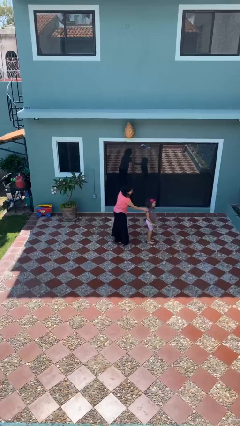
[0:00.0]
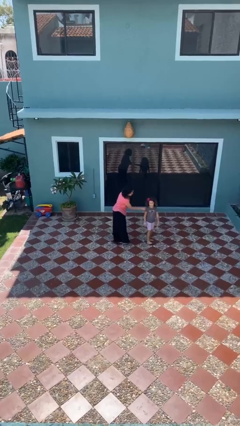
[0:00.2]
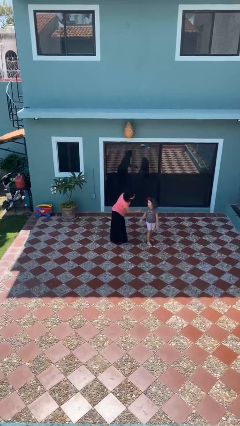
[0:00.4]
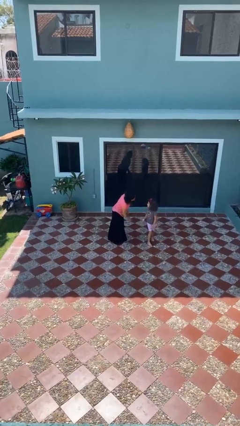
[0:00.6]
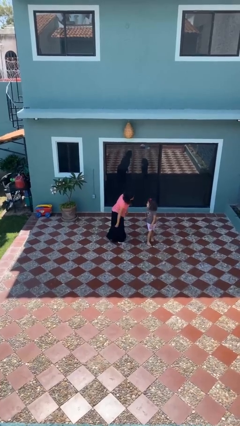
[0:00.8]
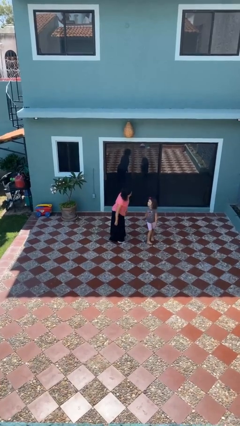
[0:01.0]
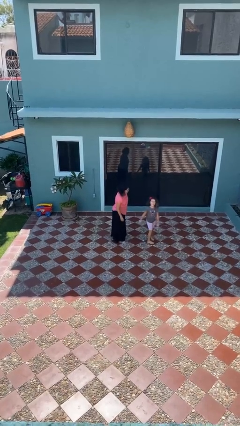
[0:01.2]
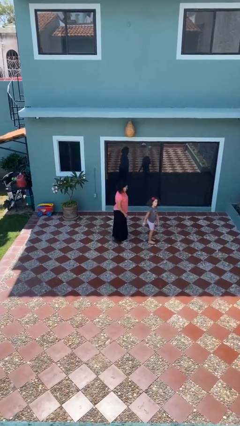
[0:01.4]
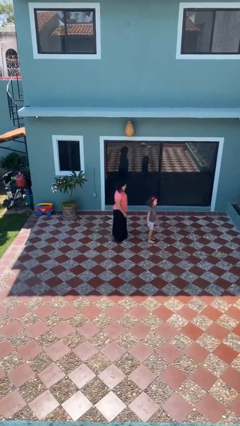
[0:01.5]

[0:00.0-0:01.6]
person spins person around

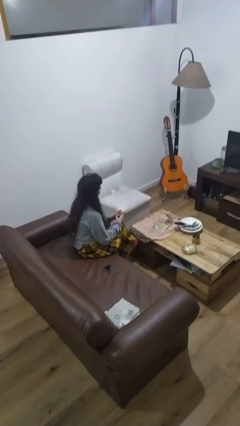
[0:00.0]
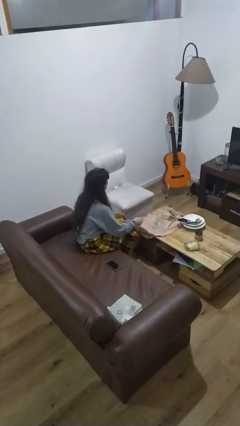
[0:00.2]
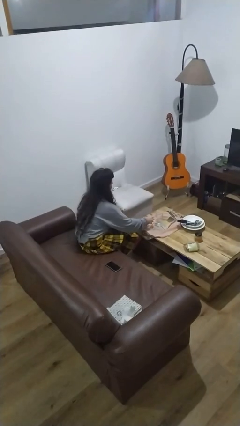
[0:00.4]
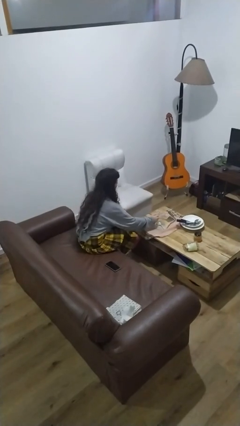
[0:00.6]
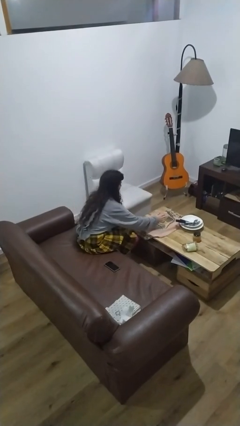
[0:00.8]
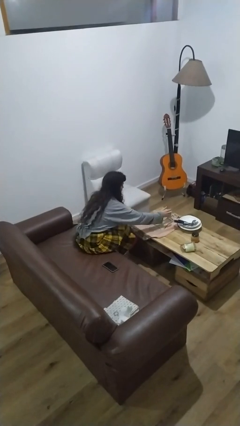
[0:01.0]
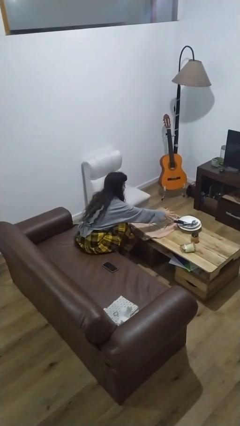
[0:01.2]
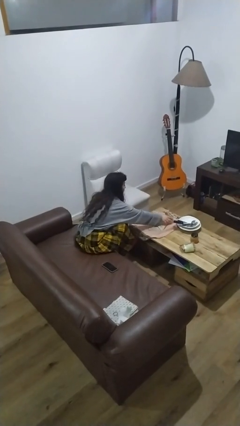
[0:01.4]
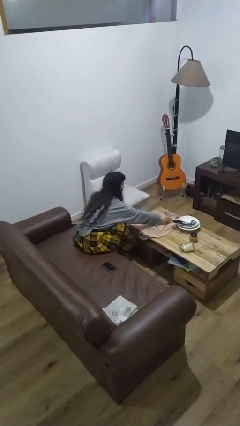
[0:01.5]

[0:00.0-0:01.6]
person knocks over glass

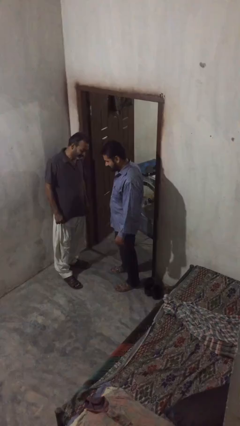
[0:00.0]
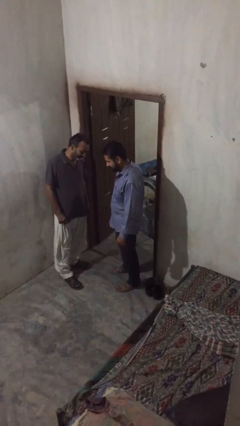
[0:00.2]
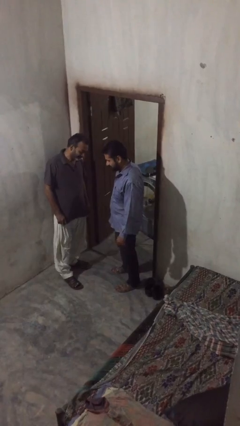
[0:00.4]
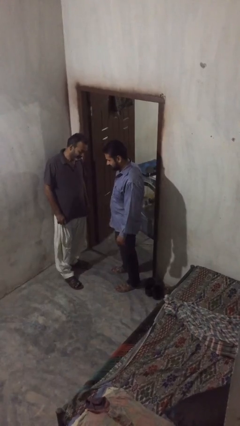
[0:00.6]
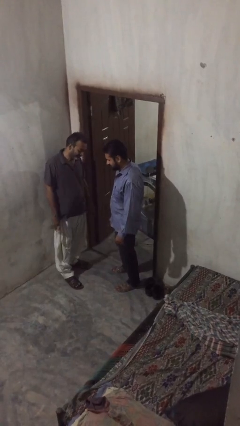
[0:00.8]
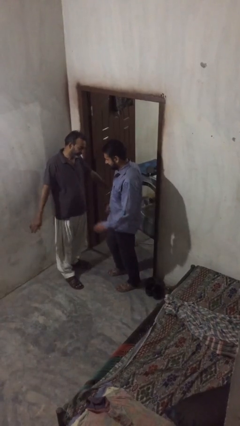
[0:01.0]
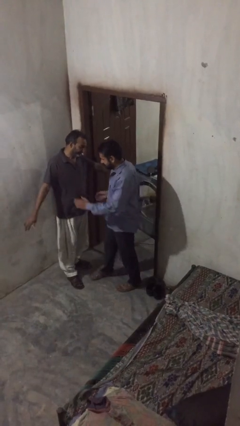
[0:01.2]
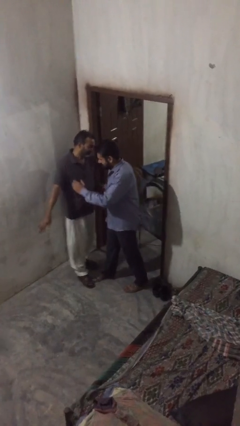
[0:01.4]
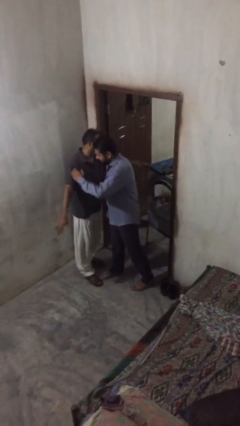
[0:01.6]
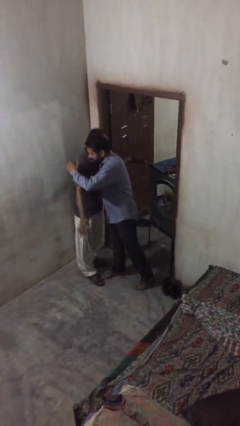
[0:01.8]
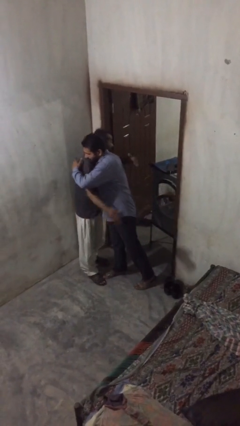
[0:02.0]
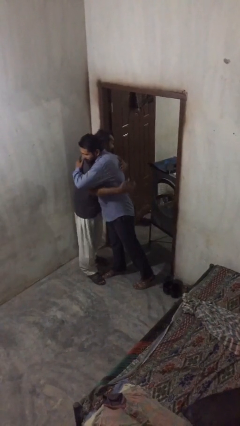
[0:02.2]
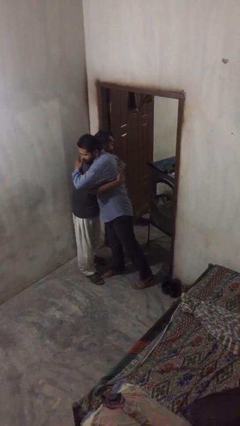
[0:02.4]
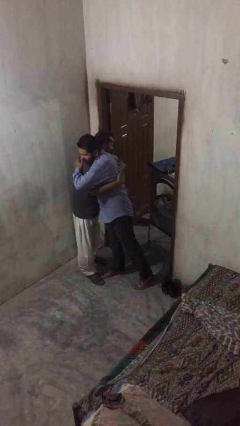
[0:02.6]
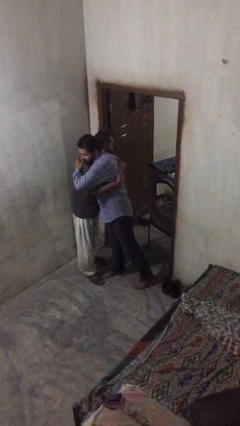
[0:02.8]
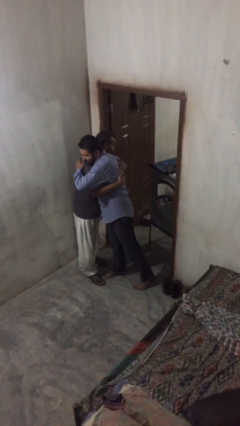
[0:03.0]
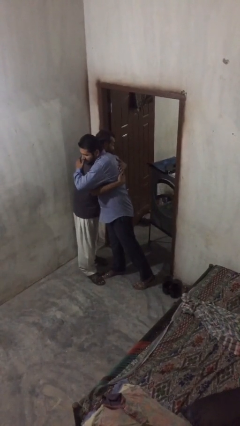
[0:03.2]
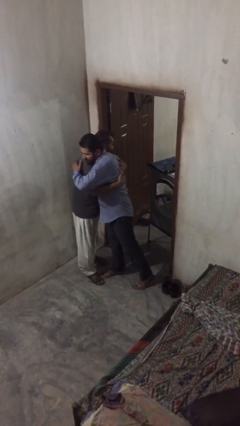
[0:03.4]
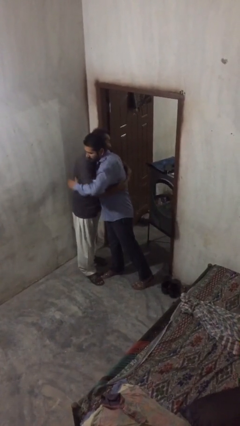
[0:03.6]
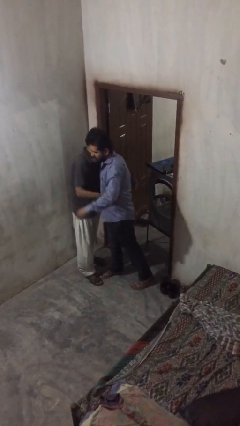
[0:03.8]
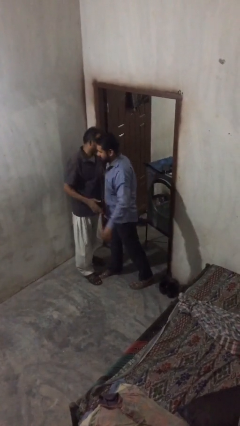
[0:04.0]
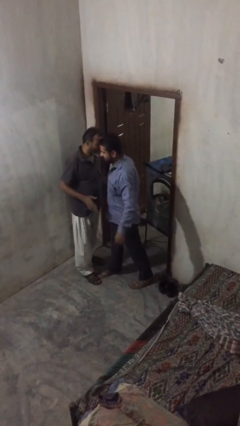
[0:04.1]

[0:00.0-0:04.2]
person embraces person

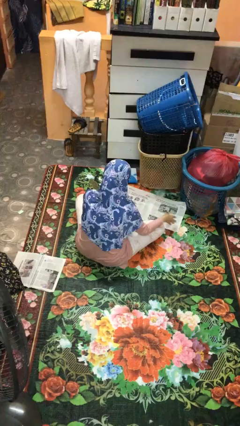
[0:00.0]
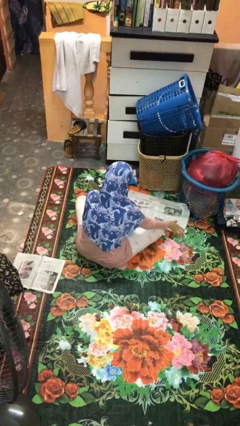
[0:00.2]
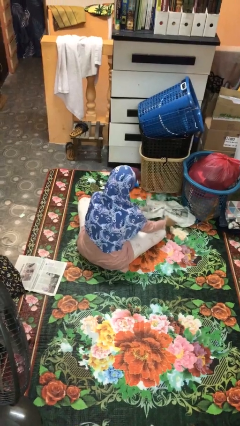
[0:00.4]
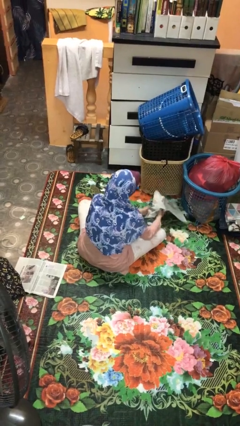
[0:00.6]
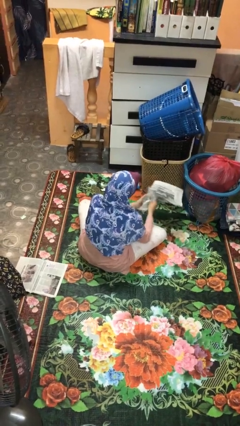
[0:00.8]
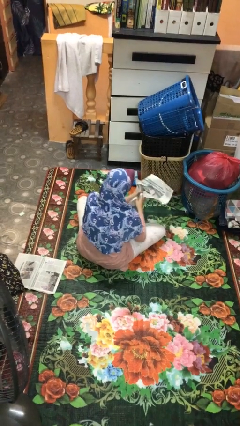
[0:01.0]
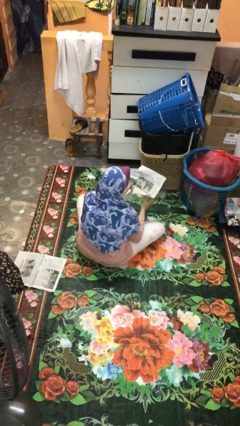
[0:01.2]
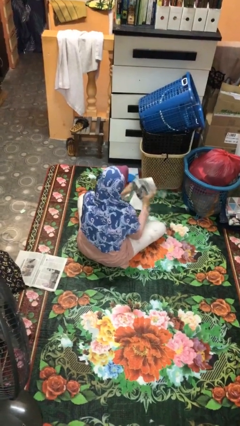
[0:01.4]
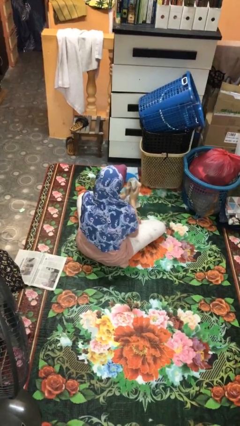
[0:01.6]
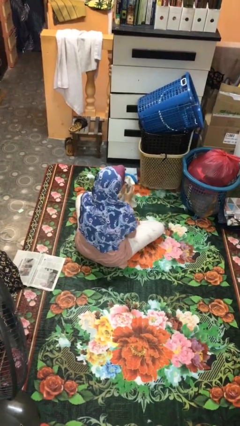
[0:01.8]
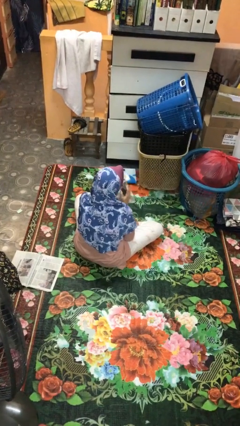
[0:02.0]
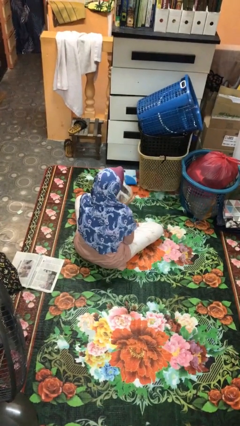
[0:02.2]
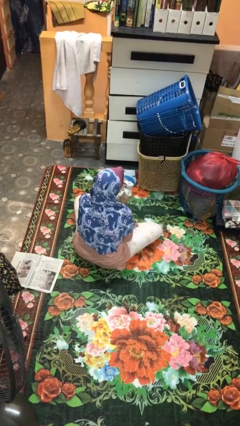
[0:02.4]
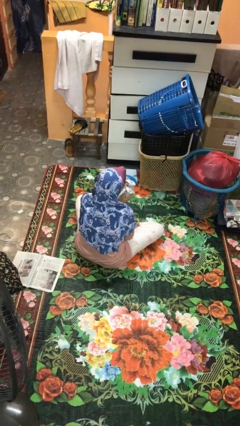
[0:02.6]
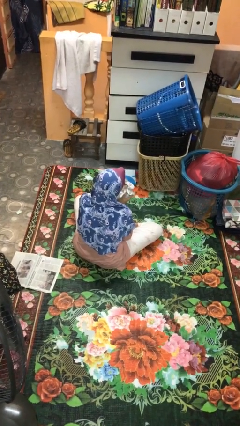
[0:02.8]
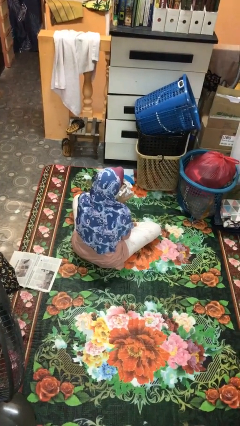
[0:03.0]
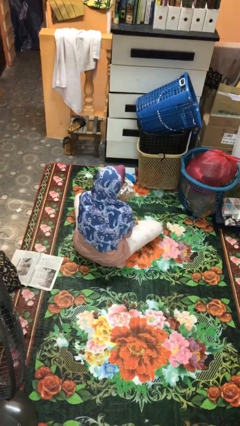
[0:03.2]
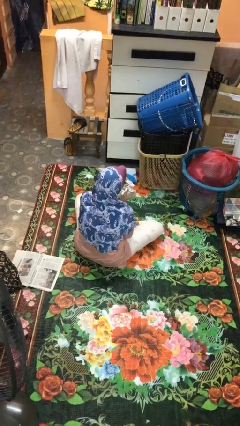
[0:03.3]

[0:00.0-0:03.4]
person crumples paper

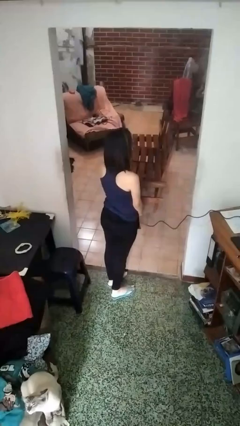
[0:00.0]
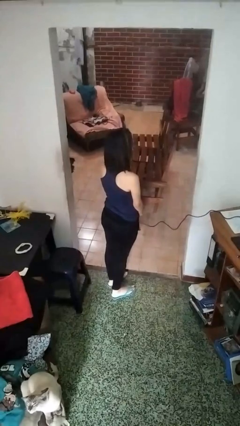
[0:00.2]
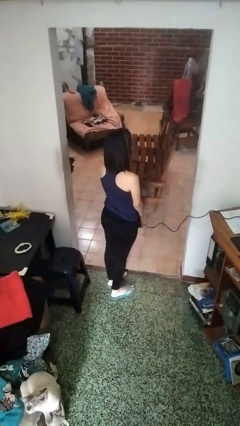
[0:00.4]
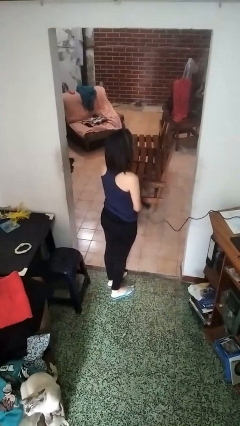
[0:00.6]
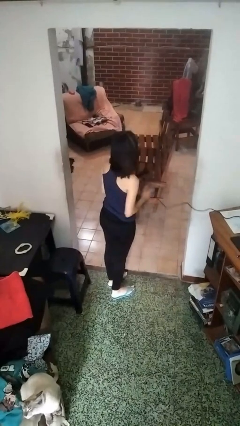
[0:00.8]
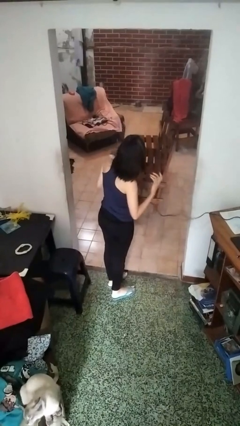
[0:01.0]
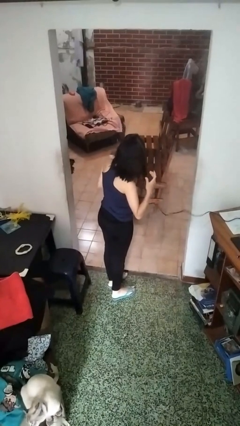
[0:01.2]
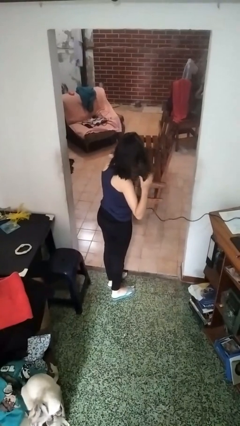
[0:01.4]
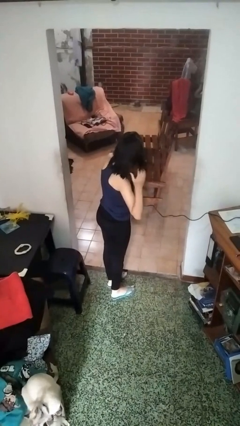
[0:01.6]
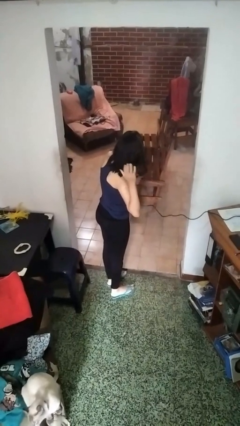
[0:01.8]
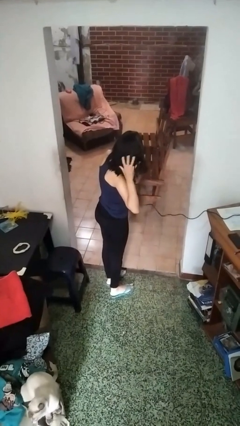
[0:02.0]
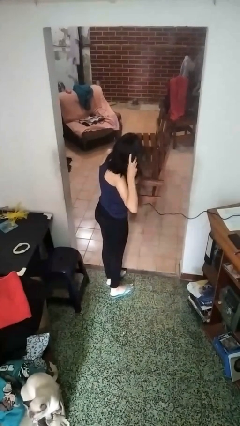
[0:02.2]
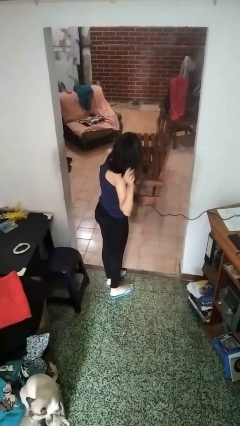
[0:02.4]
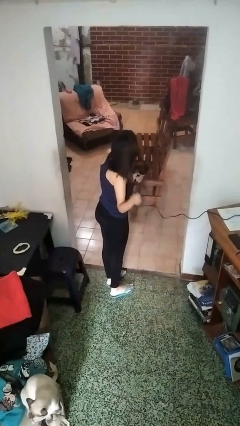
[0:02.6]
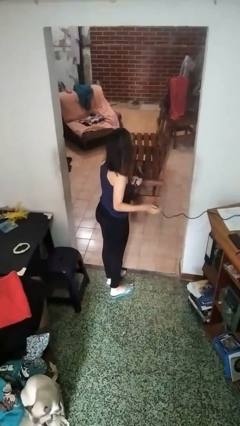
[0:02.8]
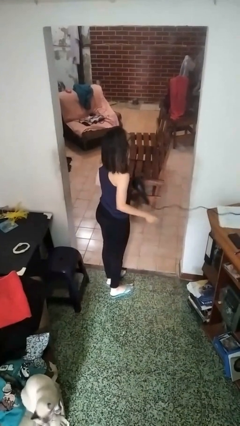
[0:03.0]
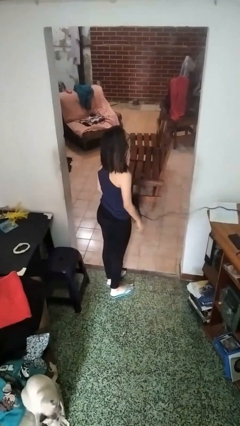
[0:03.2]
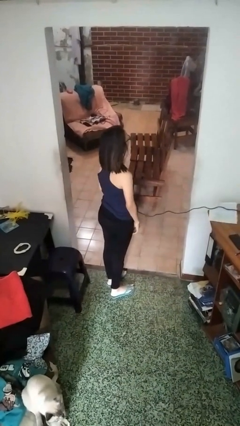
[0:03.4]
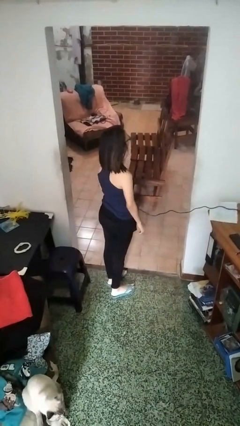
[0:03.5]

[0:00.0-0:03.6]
person dries hair with hairdryer

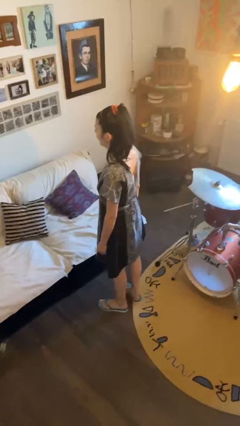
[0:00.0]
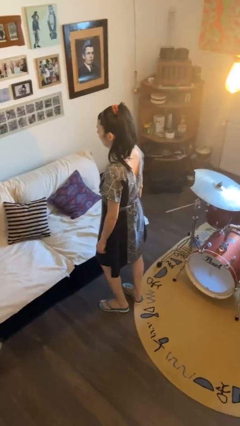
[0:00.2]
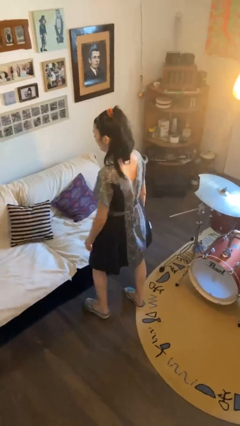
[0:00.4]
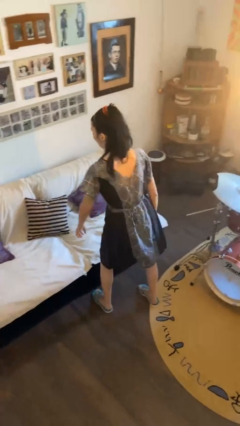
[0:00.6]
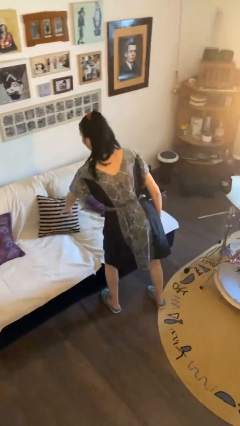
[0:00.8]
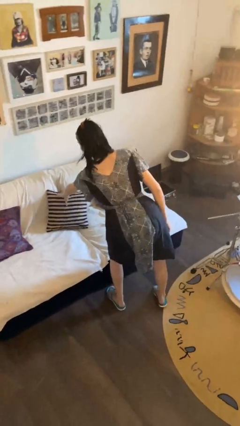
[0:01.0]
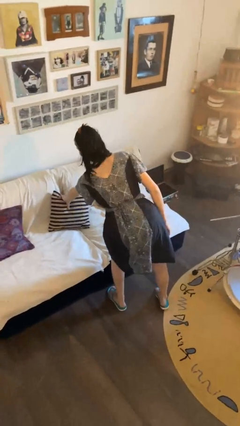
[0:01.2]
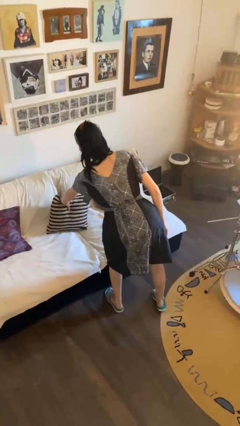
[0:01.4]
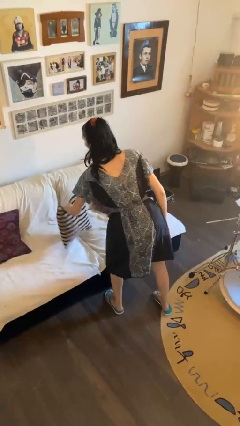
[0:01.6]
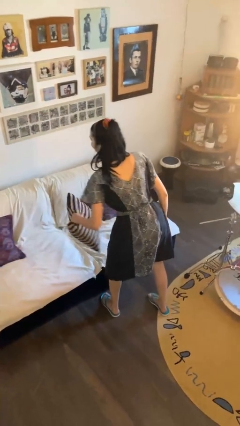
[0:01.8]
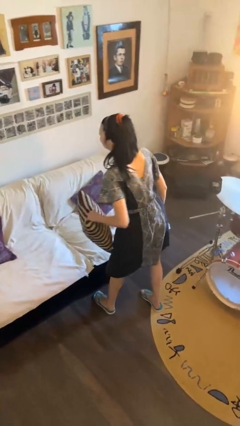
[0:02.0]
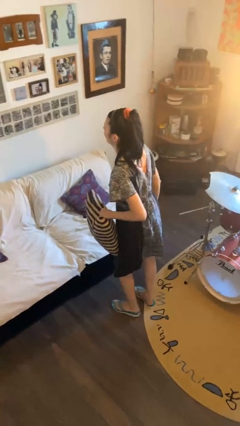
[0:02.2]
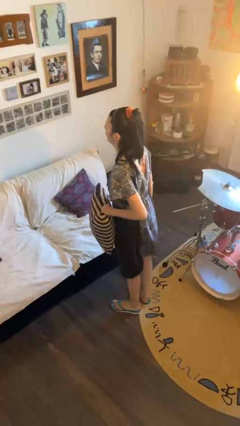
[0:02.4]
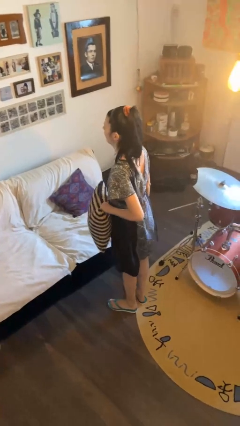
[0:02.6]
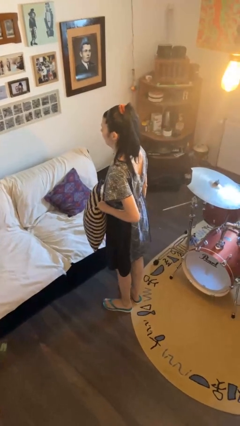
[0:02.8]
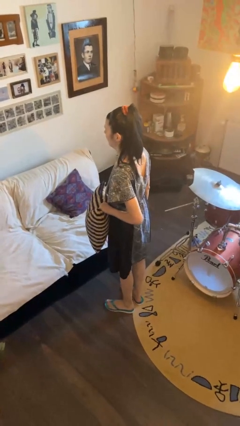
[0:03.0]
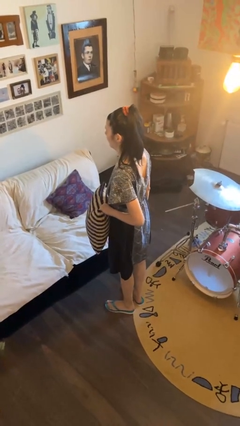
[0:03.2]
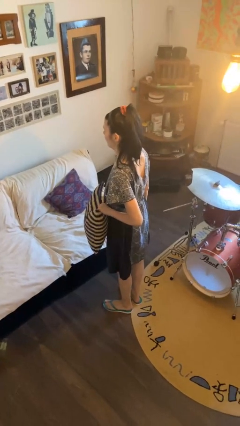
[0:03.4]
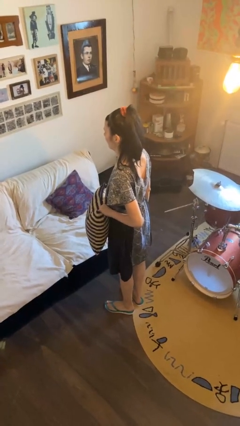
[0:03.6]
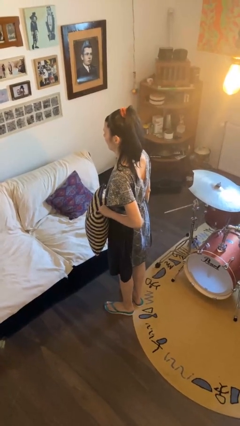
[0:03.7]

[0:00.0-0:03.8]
person picks up object from couch
